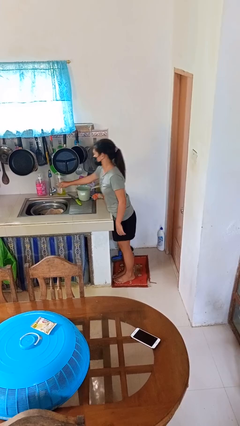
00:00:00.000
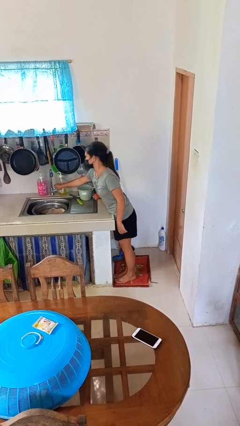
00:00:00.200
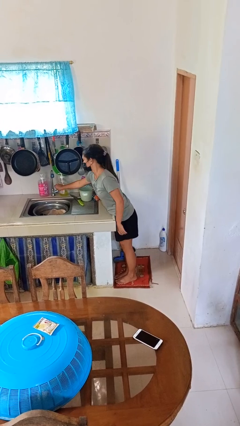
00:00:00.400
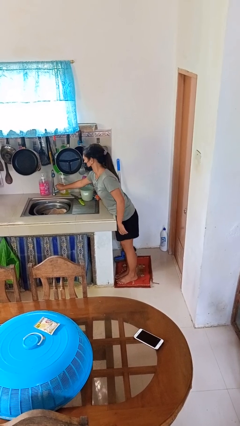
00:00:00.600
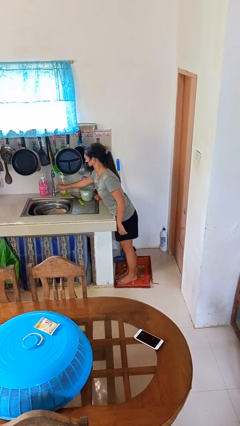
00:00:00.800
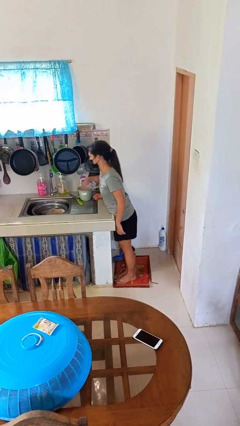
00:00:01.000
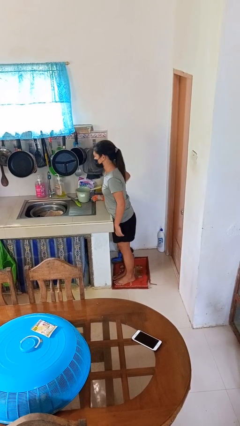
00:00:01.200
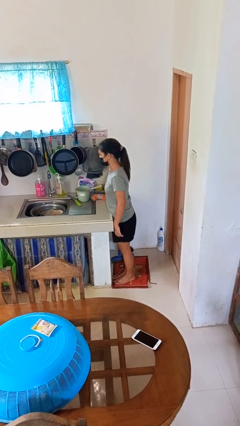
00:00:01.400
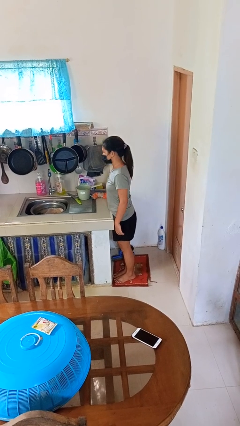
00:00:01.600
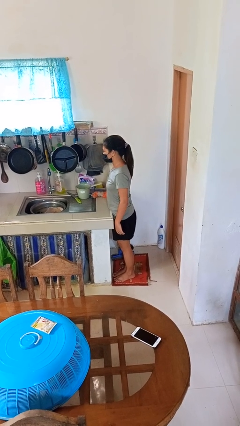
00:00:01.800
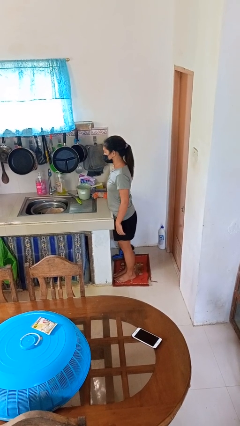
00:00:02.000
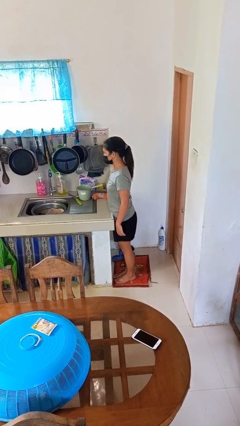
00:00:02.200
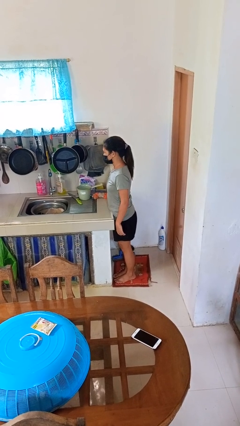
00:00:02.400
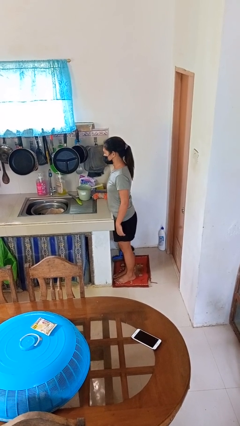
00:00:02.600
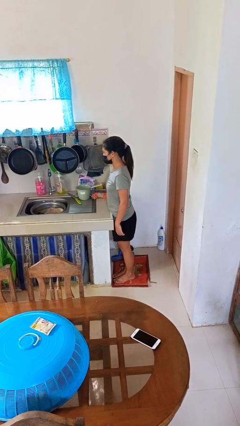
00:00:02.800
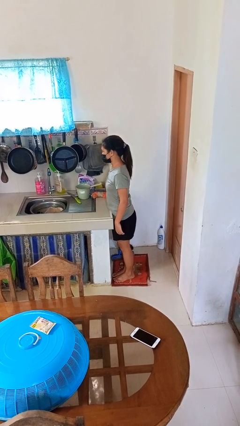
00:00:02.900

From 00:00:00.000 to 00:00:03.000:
person turns on faucet

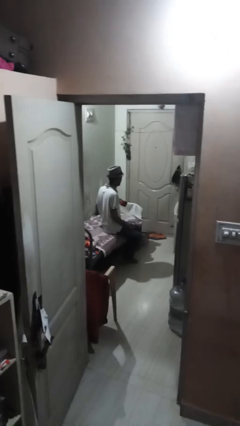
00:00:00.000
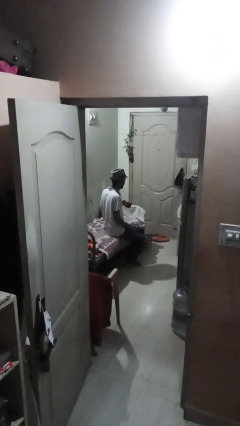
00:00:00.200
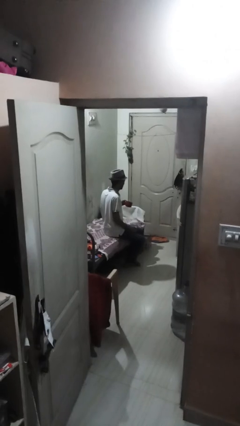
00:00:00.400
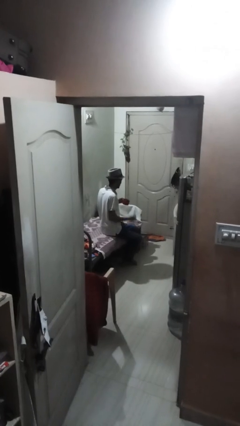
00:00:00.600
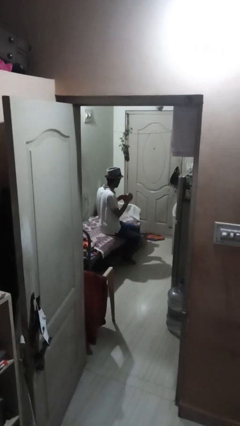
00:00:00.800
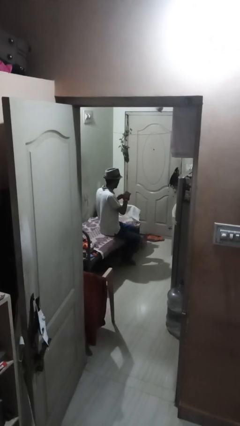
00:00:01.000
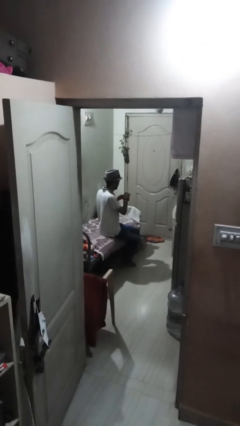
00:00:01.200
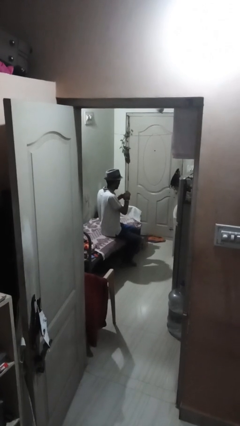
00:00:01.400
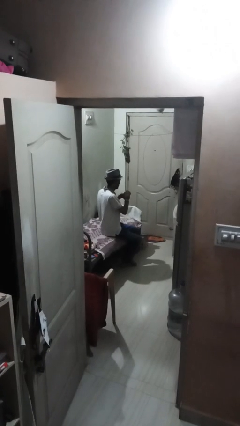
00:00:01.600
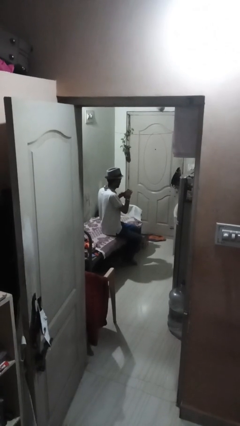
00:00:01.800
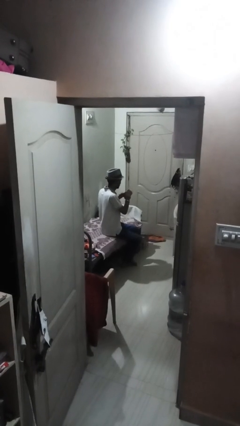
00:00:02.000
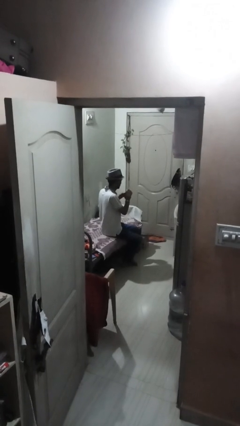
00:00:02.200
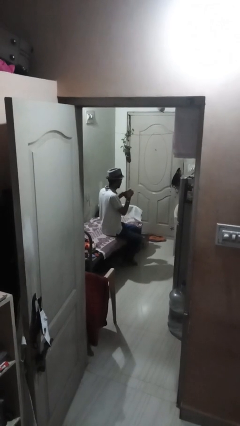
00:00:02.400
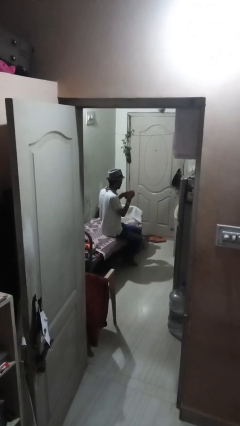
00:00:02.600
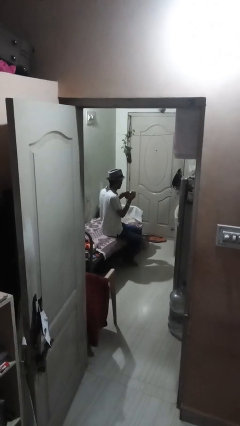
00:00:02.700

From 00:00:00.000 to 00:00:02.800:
person stirs mug

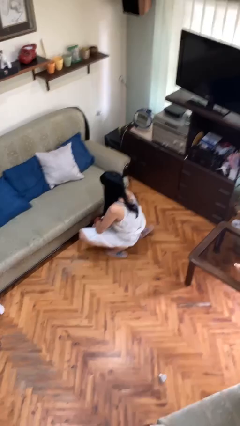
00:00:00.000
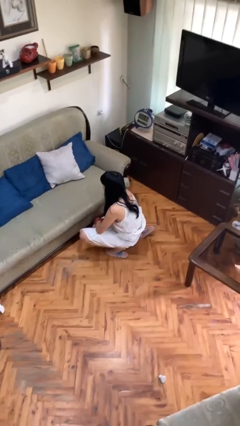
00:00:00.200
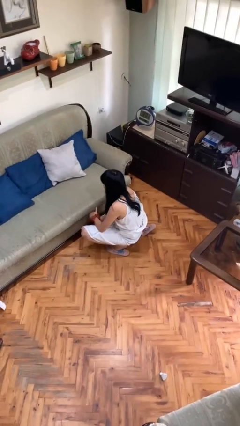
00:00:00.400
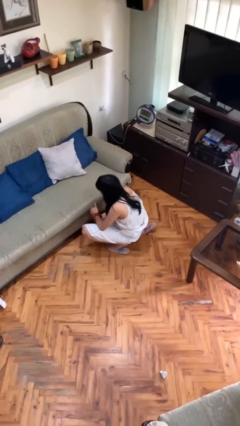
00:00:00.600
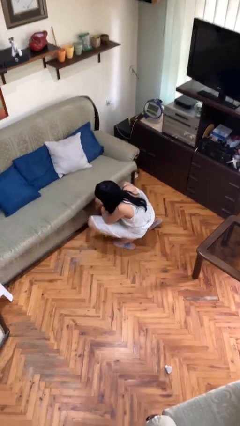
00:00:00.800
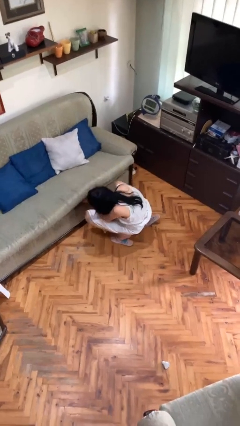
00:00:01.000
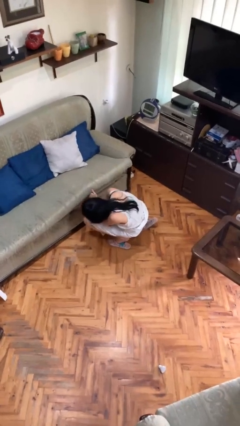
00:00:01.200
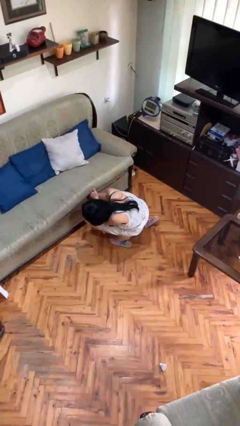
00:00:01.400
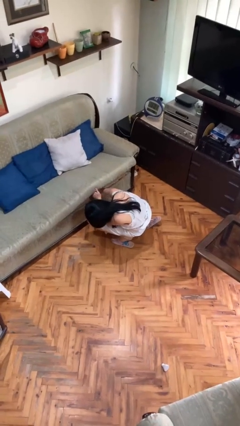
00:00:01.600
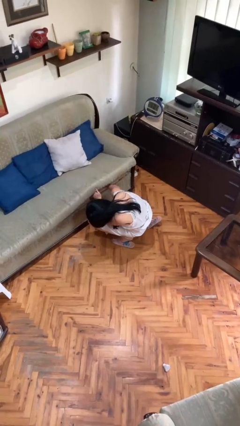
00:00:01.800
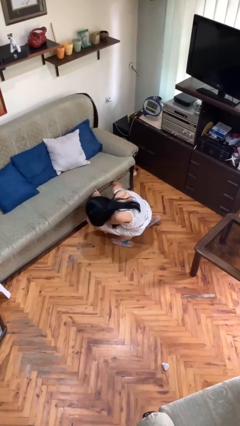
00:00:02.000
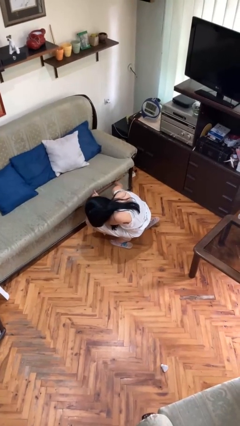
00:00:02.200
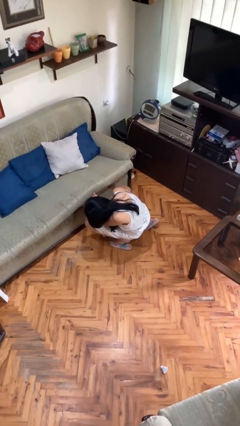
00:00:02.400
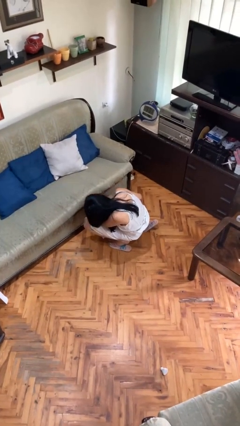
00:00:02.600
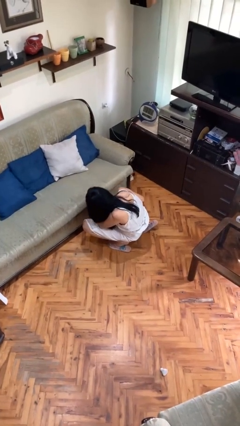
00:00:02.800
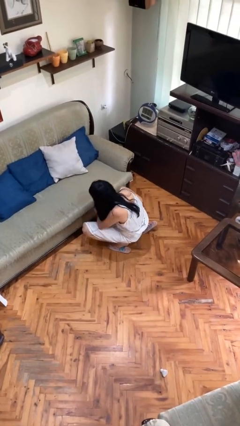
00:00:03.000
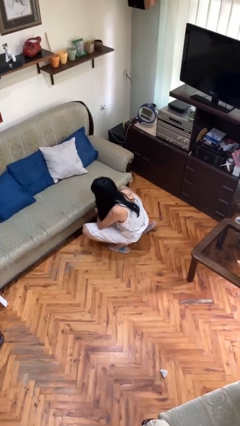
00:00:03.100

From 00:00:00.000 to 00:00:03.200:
person searches under couch

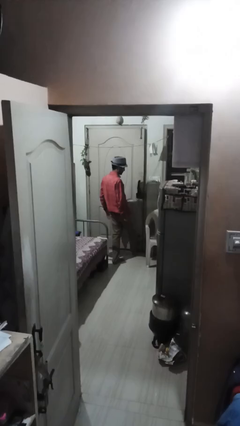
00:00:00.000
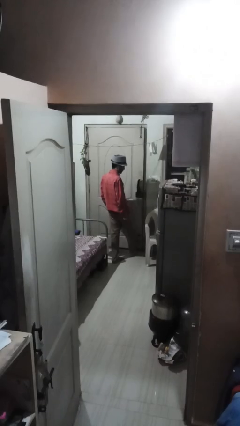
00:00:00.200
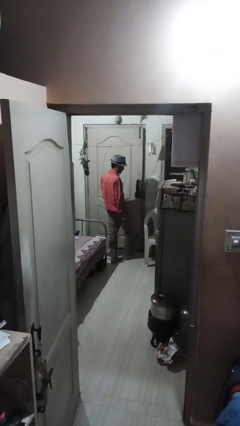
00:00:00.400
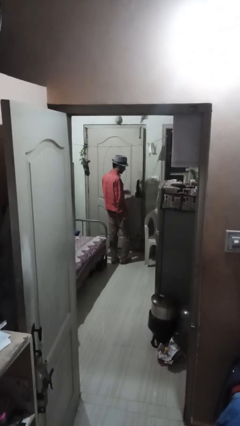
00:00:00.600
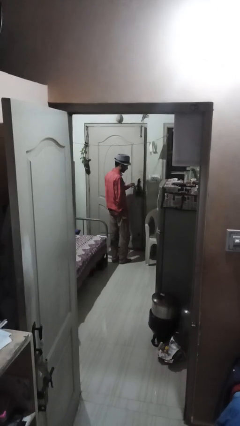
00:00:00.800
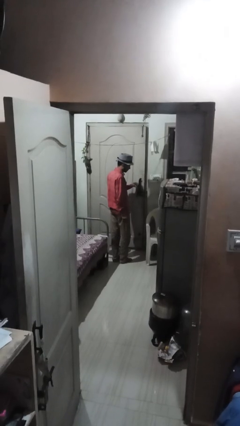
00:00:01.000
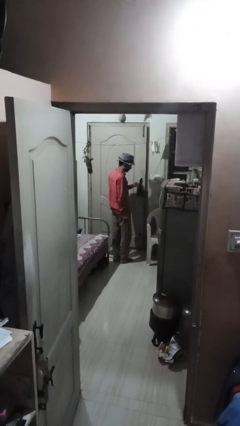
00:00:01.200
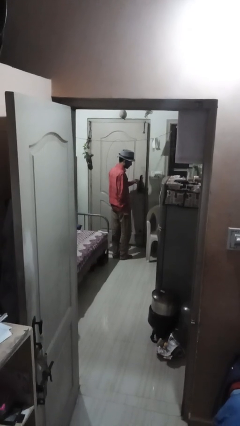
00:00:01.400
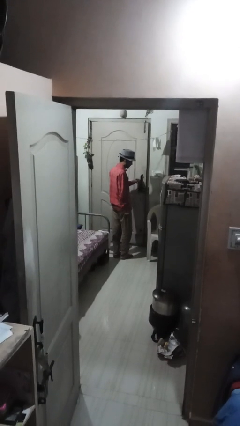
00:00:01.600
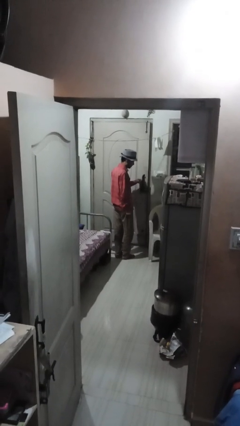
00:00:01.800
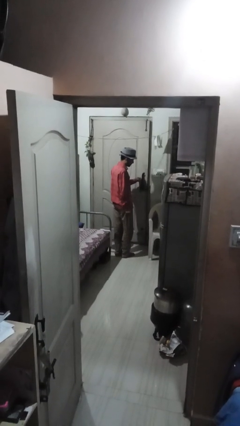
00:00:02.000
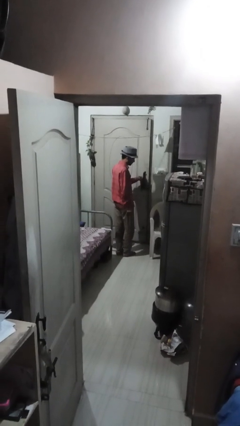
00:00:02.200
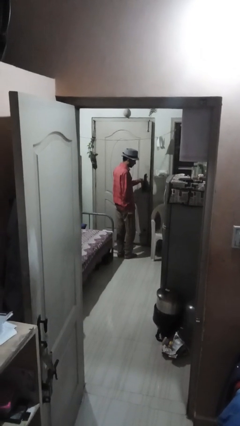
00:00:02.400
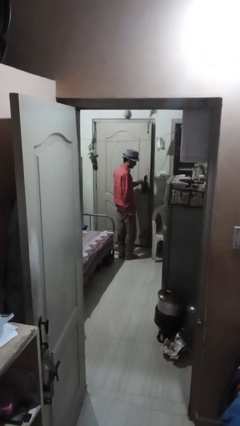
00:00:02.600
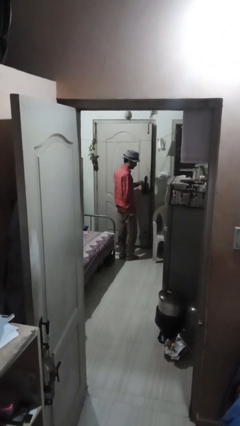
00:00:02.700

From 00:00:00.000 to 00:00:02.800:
person closes door with foot

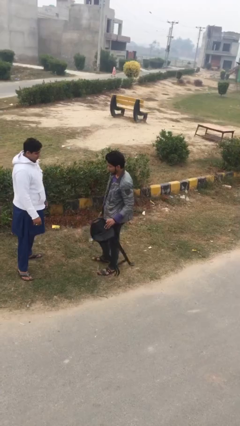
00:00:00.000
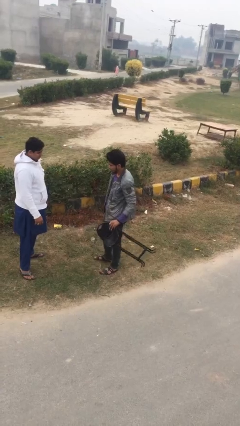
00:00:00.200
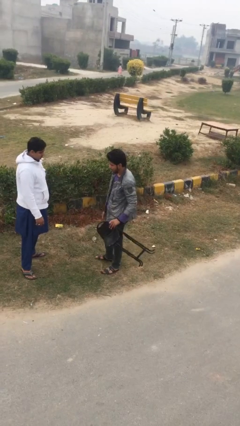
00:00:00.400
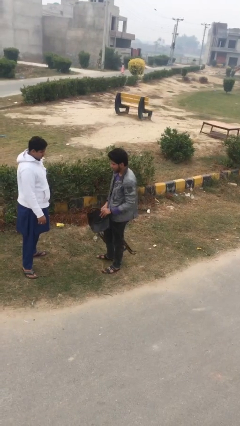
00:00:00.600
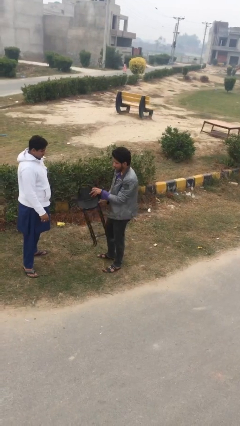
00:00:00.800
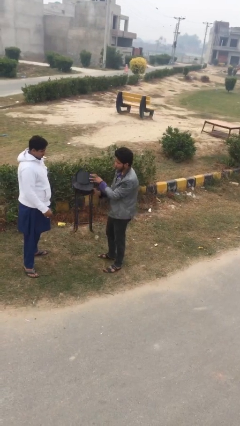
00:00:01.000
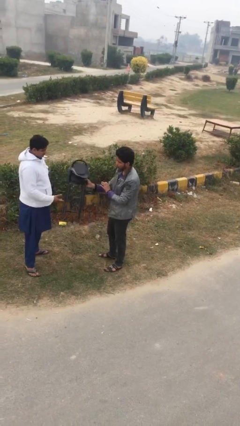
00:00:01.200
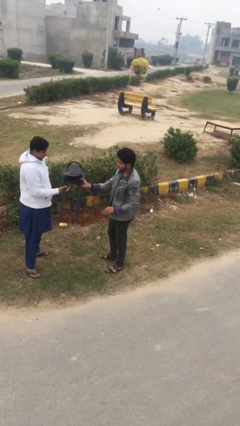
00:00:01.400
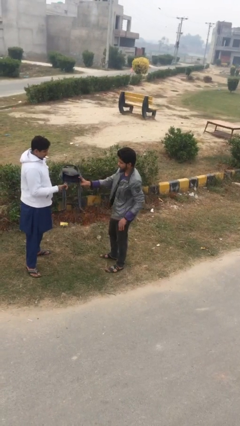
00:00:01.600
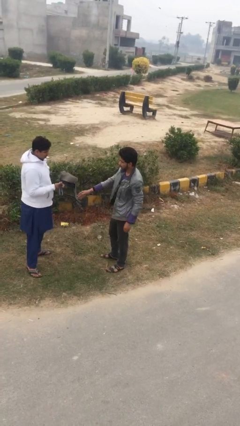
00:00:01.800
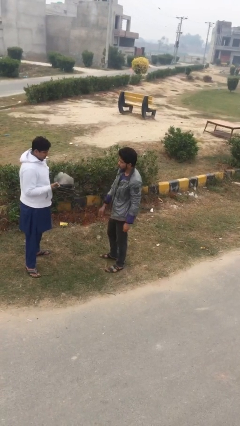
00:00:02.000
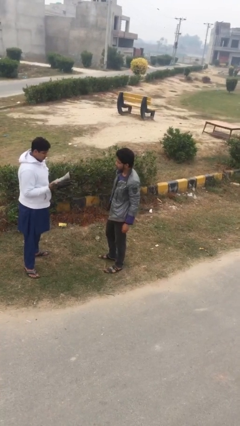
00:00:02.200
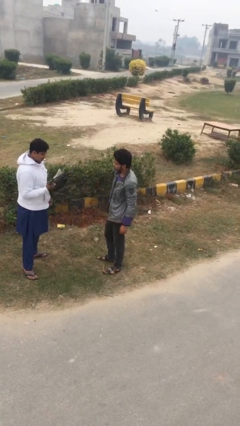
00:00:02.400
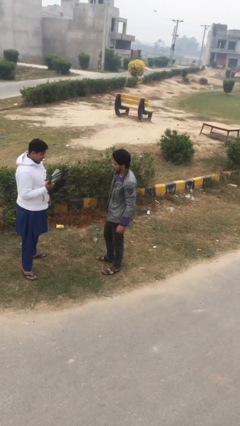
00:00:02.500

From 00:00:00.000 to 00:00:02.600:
person transfers object to person

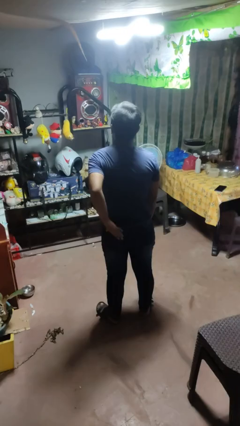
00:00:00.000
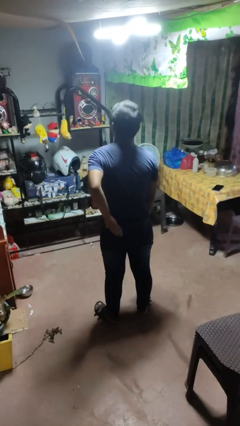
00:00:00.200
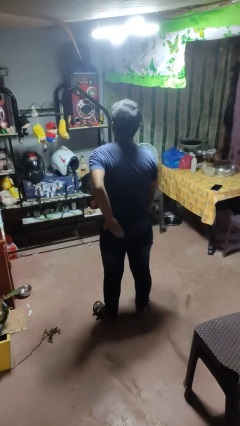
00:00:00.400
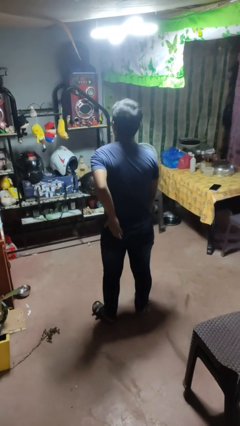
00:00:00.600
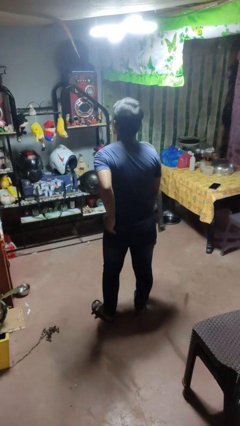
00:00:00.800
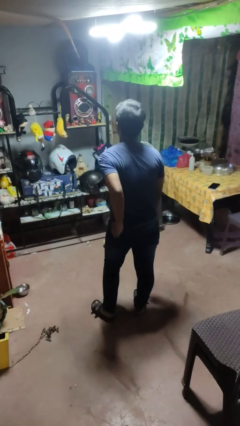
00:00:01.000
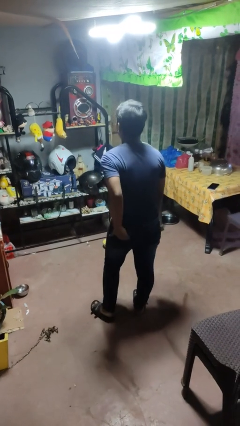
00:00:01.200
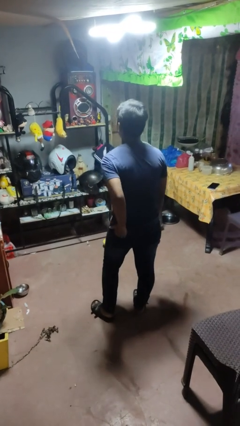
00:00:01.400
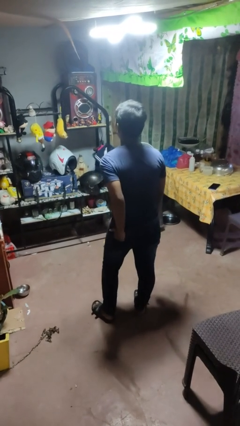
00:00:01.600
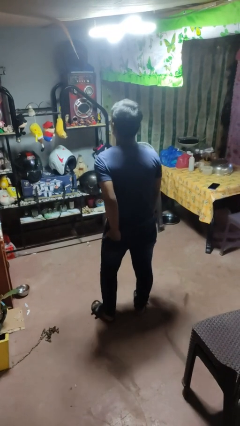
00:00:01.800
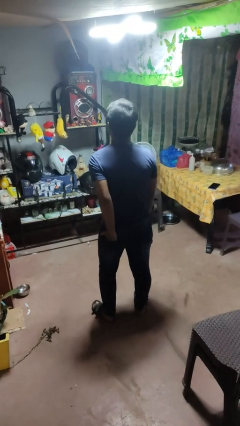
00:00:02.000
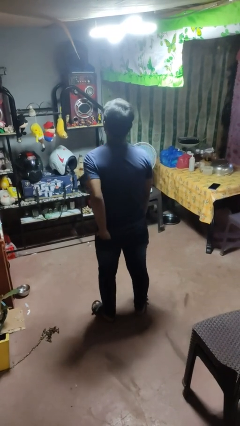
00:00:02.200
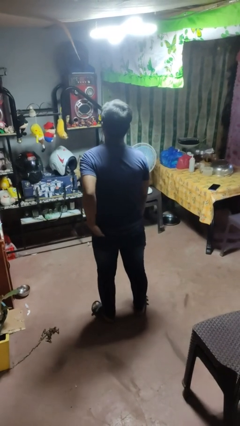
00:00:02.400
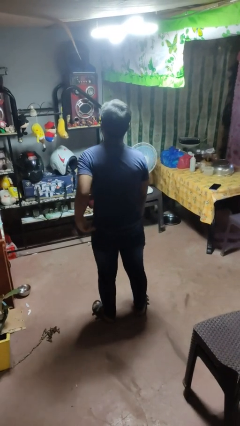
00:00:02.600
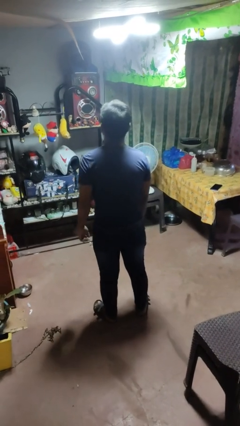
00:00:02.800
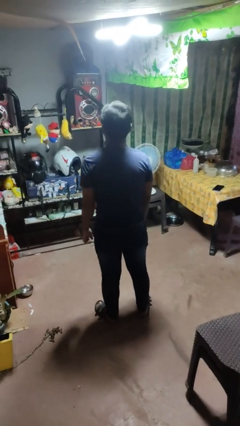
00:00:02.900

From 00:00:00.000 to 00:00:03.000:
person puts hands in back pockets
